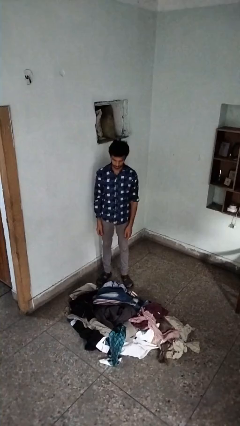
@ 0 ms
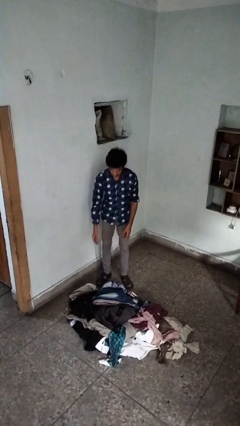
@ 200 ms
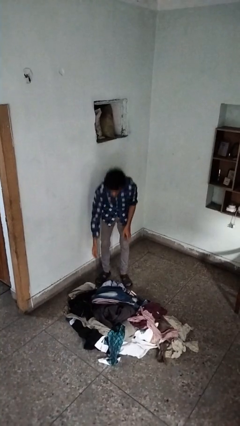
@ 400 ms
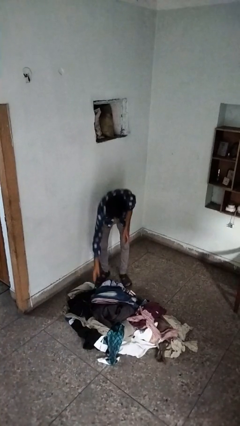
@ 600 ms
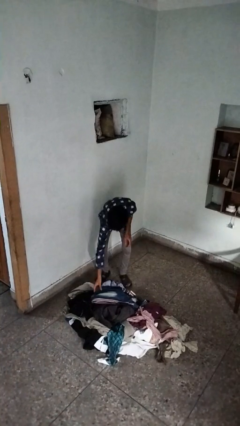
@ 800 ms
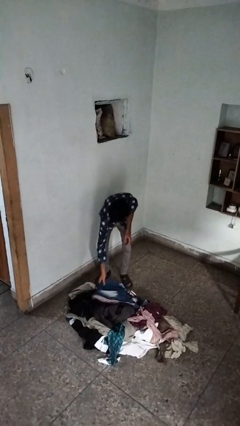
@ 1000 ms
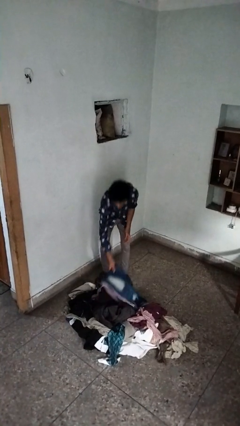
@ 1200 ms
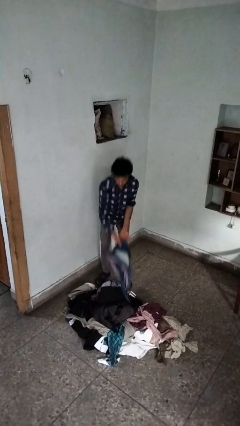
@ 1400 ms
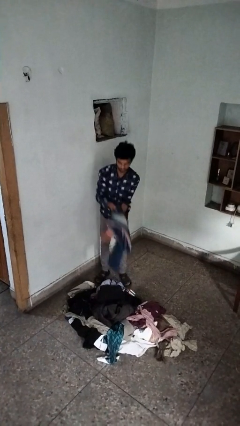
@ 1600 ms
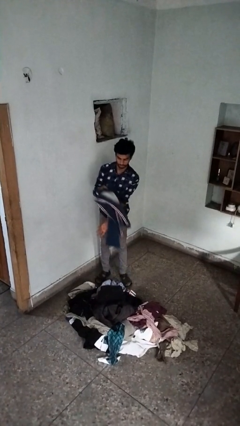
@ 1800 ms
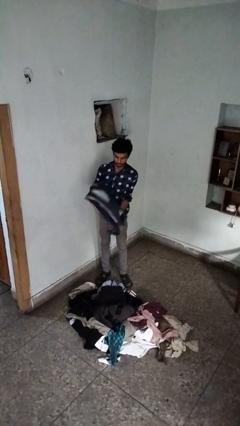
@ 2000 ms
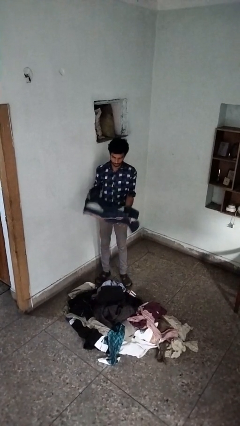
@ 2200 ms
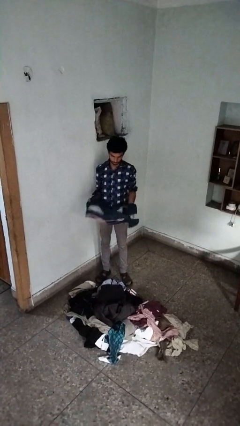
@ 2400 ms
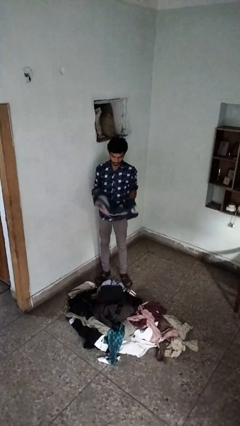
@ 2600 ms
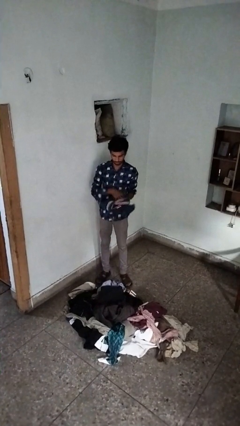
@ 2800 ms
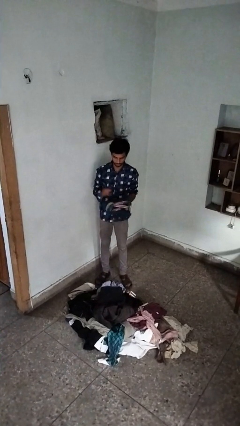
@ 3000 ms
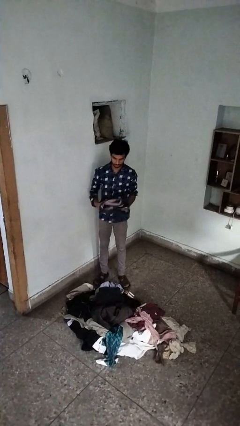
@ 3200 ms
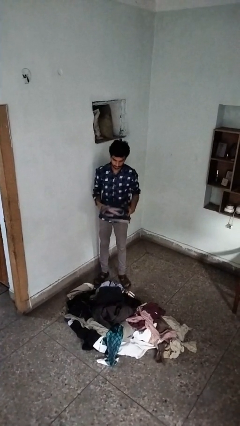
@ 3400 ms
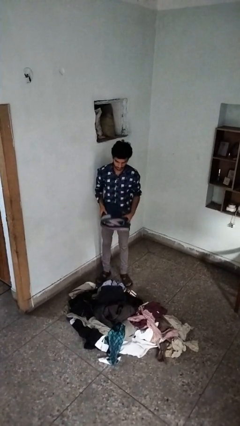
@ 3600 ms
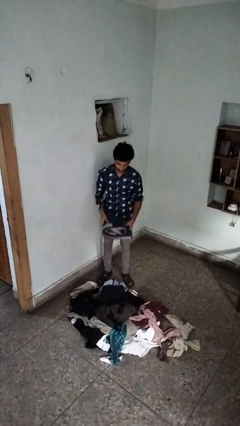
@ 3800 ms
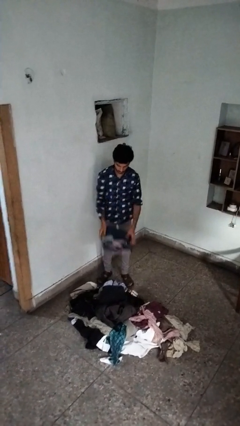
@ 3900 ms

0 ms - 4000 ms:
person folds pants

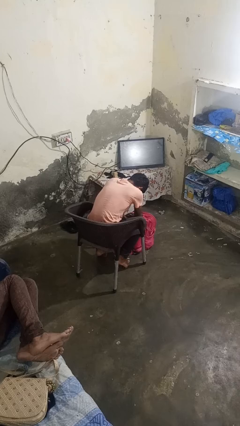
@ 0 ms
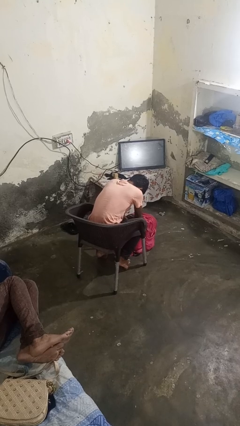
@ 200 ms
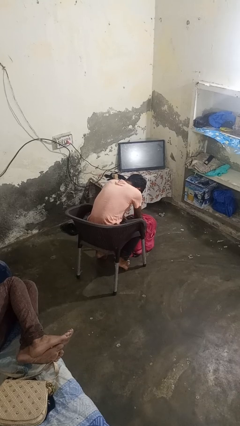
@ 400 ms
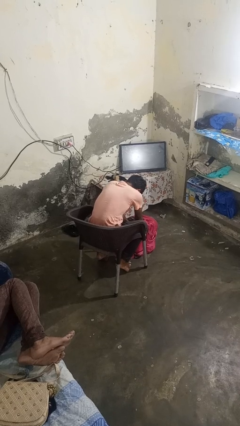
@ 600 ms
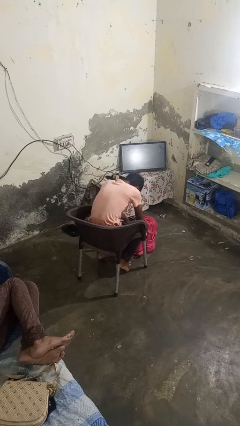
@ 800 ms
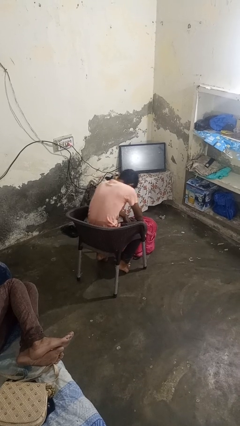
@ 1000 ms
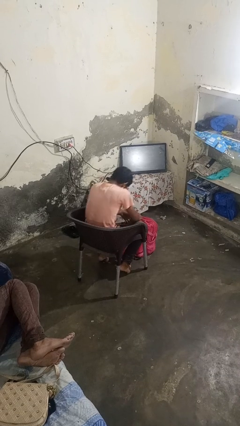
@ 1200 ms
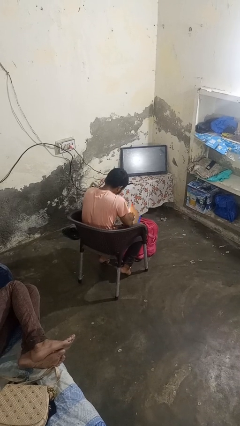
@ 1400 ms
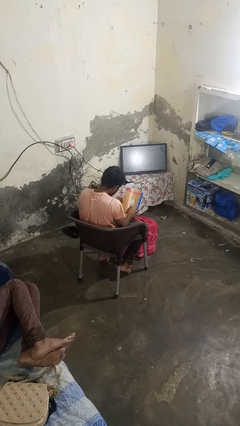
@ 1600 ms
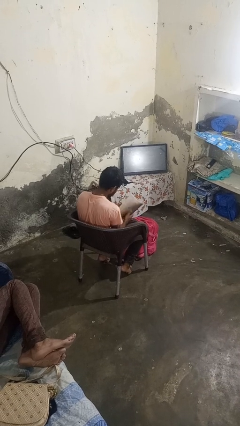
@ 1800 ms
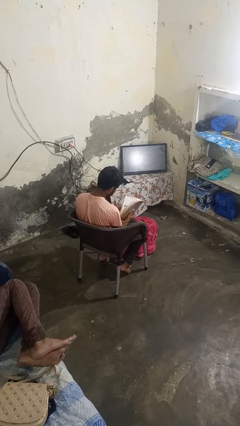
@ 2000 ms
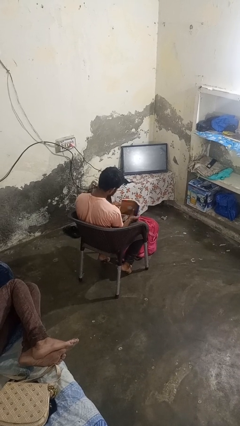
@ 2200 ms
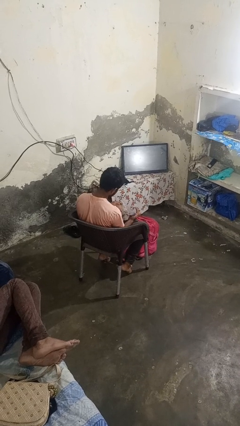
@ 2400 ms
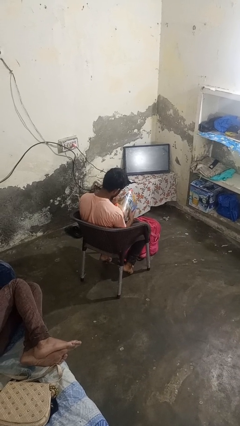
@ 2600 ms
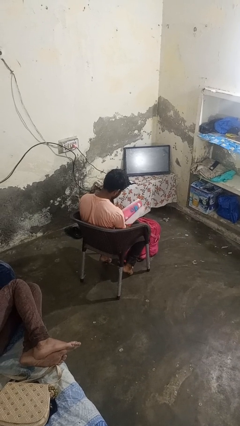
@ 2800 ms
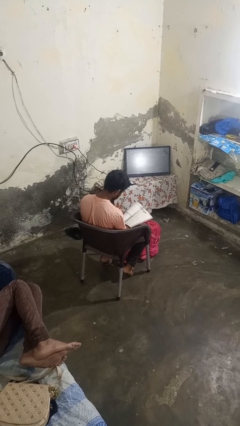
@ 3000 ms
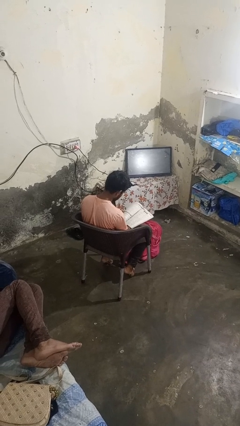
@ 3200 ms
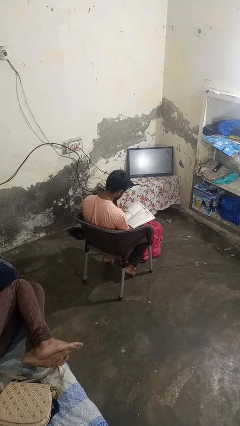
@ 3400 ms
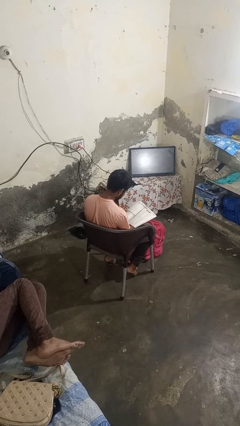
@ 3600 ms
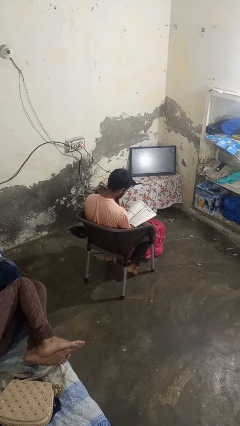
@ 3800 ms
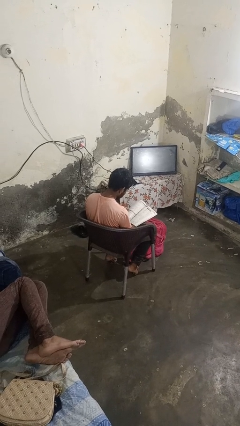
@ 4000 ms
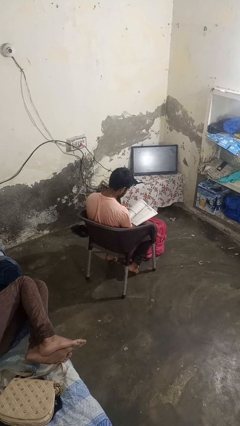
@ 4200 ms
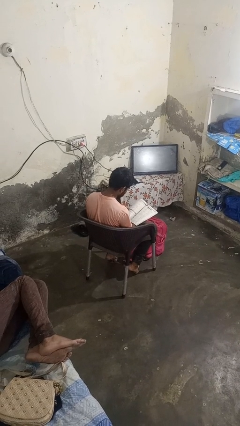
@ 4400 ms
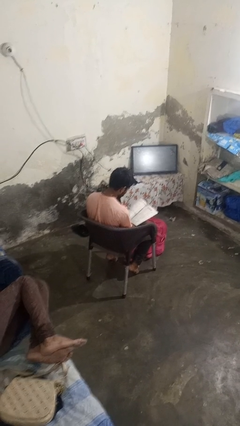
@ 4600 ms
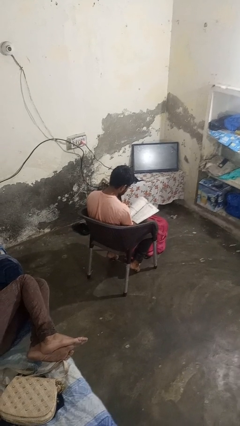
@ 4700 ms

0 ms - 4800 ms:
person takes object from backpack

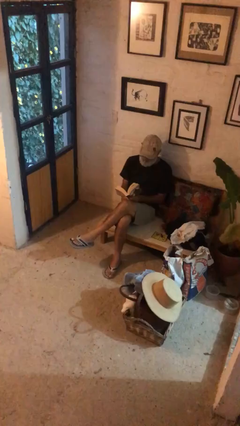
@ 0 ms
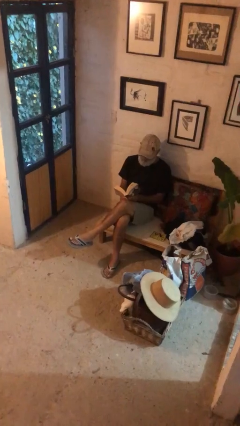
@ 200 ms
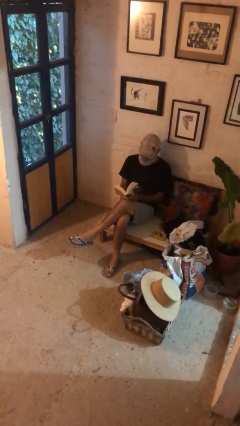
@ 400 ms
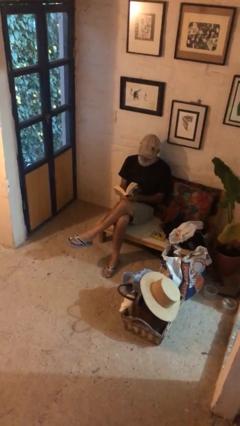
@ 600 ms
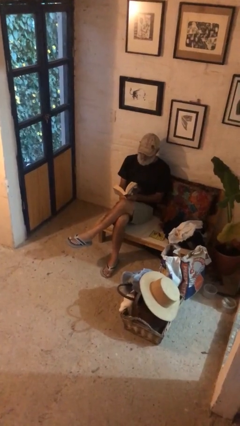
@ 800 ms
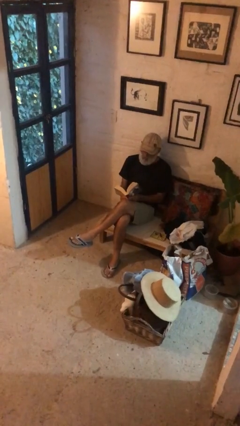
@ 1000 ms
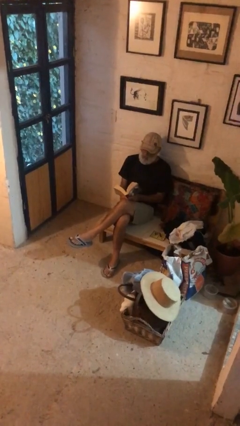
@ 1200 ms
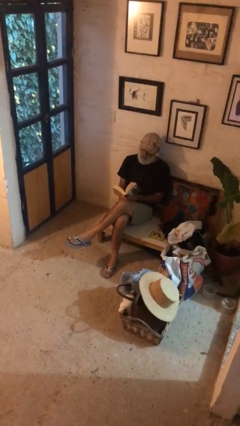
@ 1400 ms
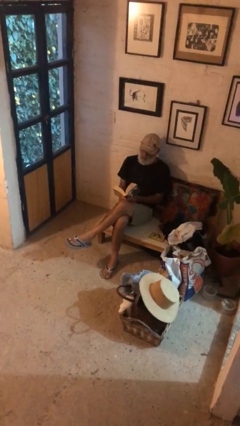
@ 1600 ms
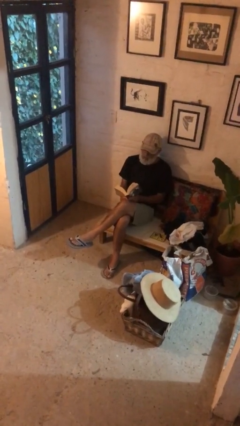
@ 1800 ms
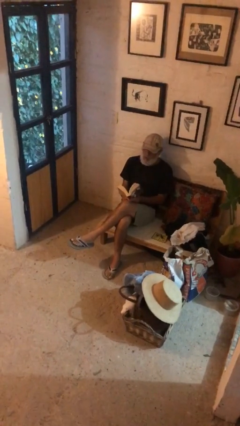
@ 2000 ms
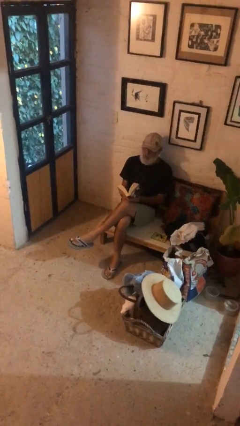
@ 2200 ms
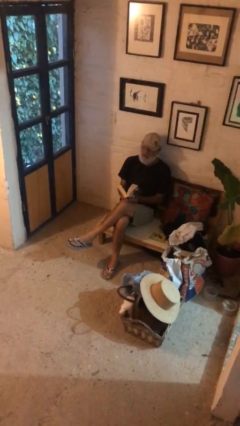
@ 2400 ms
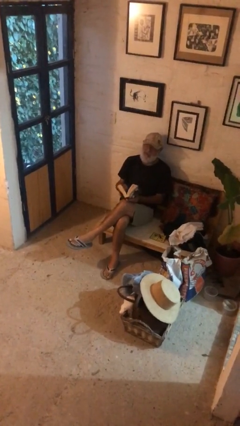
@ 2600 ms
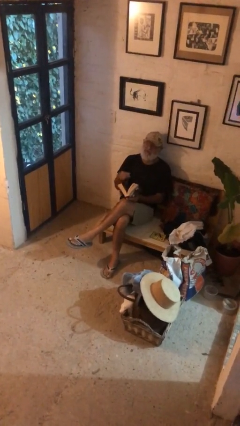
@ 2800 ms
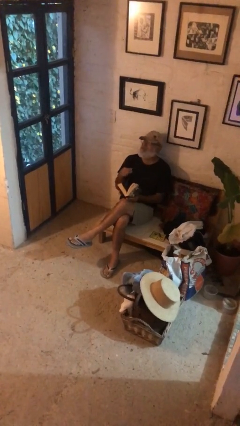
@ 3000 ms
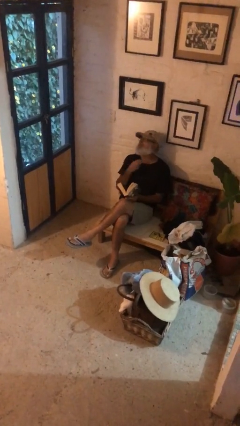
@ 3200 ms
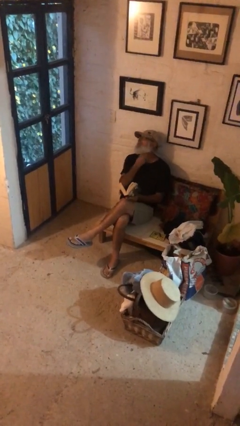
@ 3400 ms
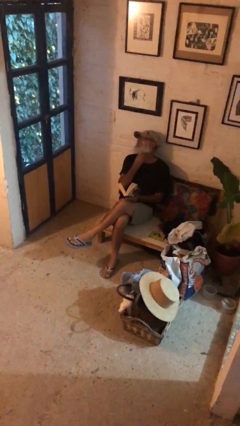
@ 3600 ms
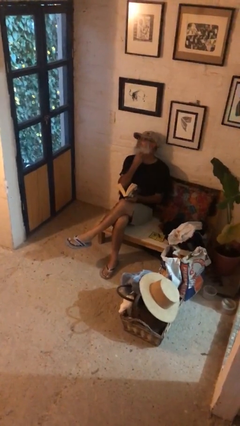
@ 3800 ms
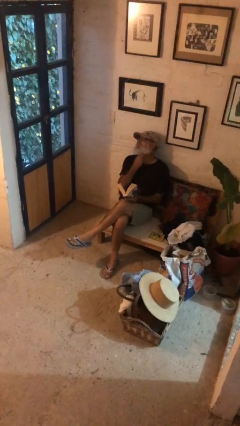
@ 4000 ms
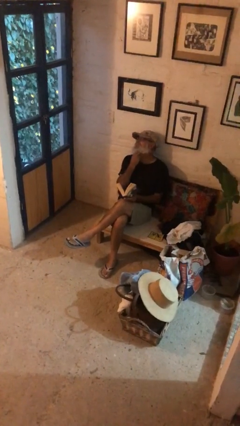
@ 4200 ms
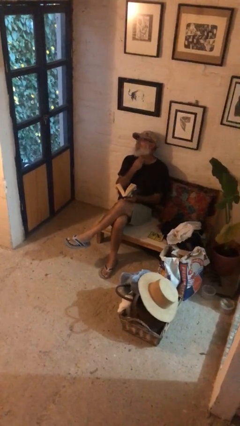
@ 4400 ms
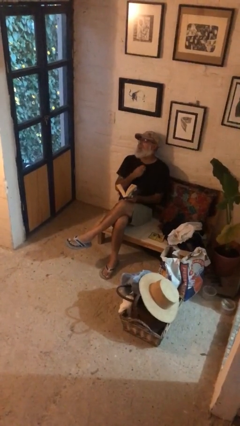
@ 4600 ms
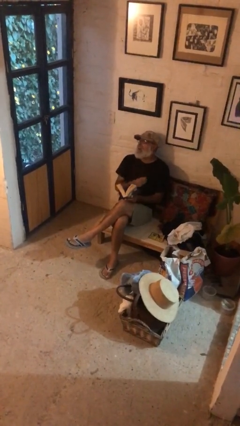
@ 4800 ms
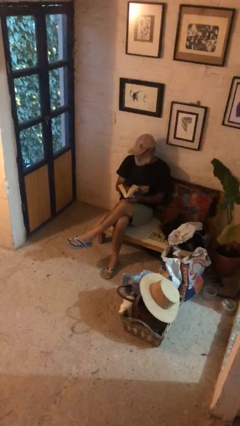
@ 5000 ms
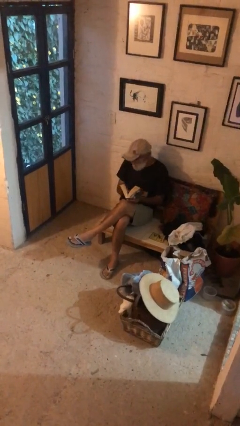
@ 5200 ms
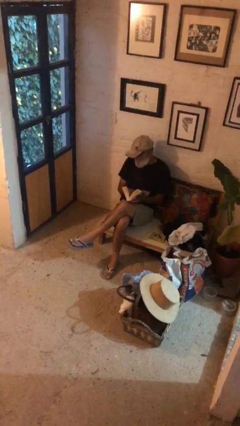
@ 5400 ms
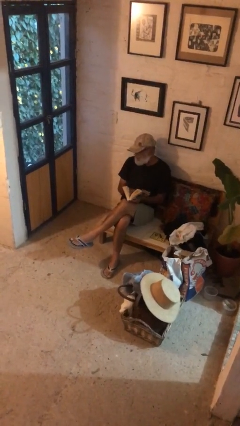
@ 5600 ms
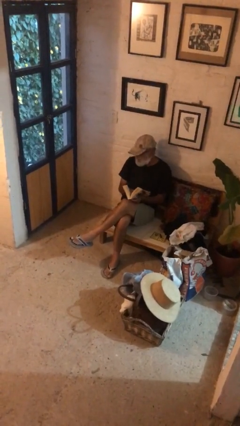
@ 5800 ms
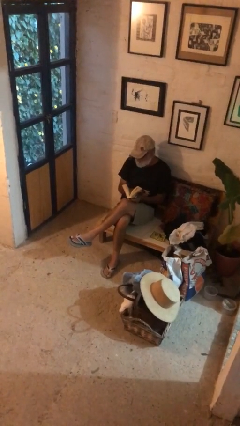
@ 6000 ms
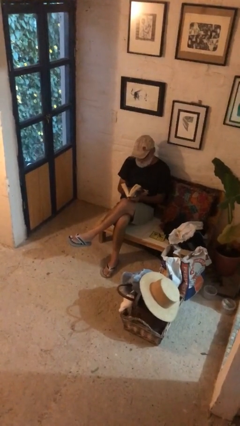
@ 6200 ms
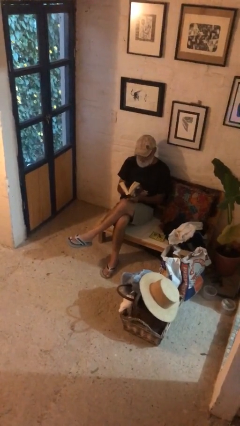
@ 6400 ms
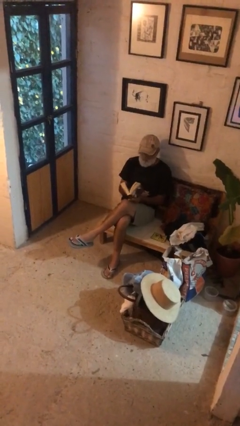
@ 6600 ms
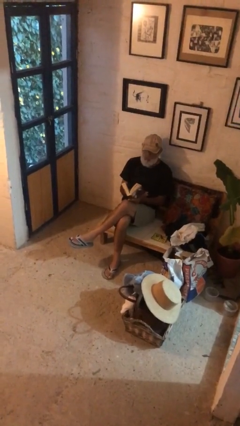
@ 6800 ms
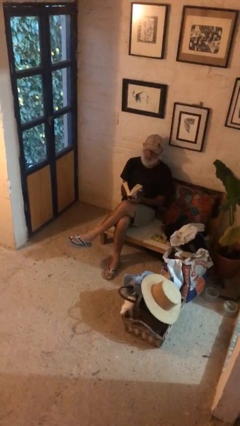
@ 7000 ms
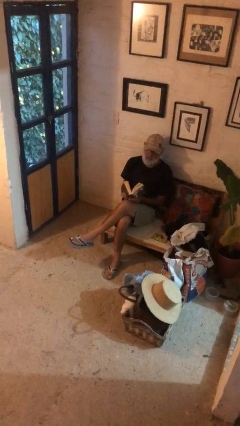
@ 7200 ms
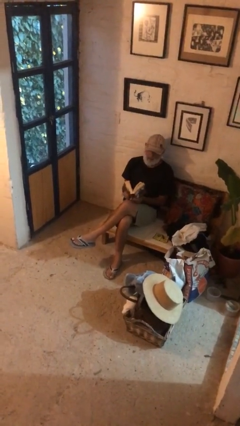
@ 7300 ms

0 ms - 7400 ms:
person reads document

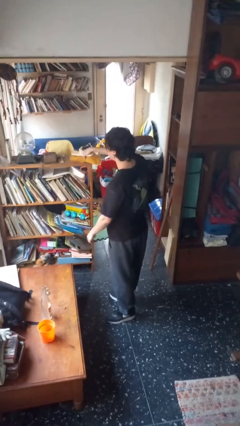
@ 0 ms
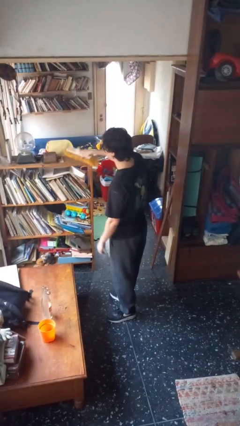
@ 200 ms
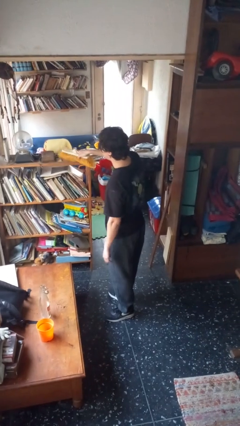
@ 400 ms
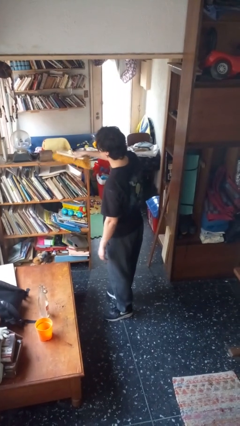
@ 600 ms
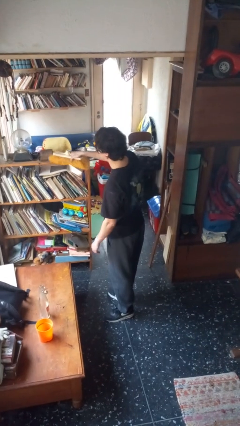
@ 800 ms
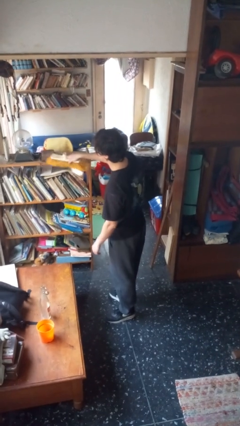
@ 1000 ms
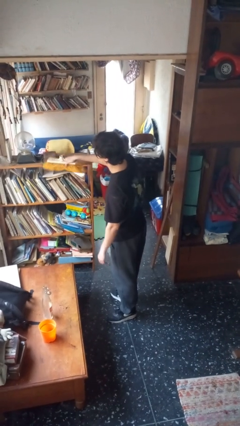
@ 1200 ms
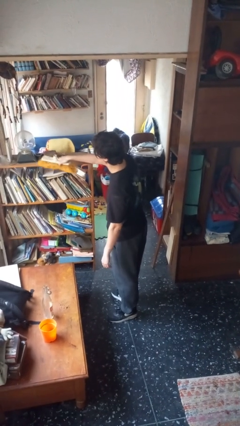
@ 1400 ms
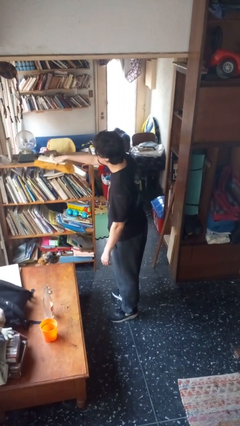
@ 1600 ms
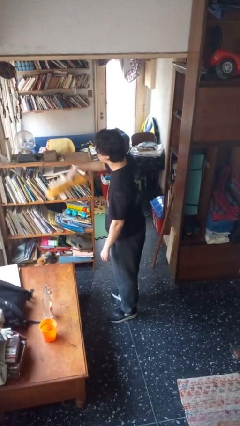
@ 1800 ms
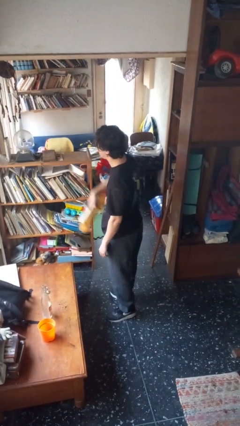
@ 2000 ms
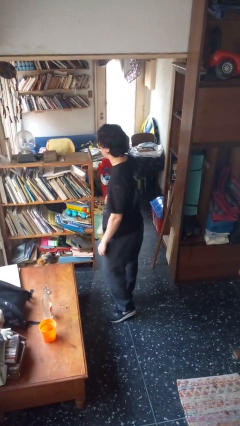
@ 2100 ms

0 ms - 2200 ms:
person dusts furniture
